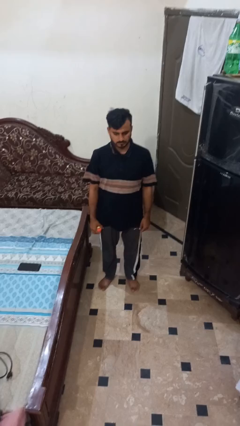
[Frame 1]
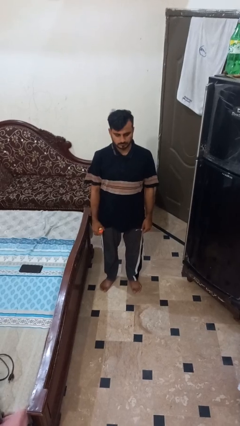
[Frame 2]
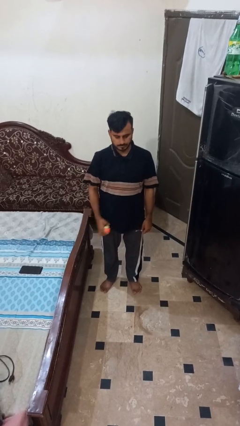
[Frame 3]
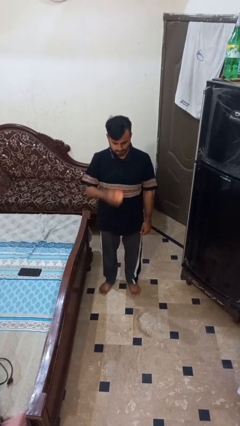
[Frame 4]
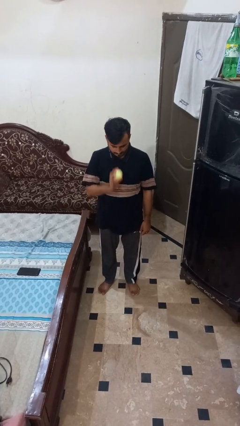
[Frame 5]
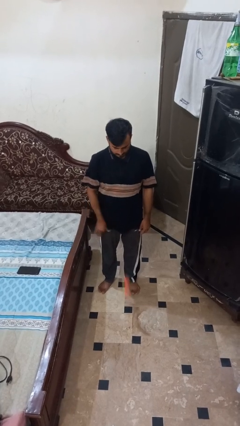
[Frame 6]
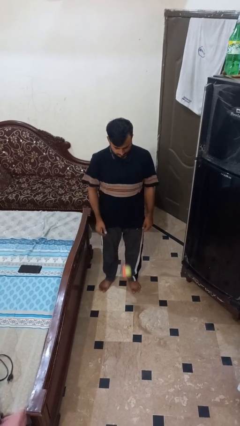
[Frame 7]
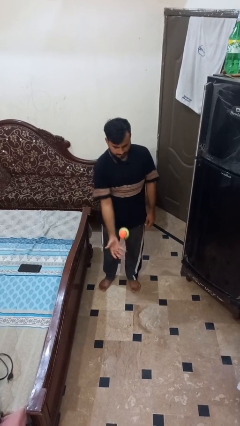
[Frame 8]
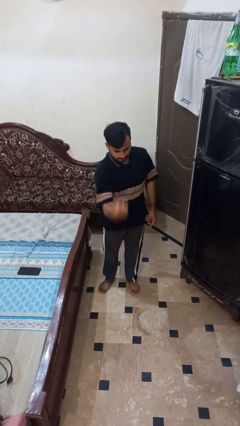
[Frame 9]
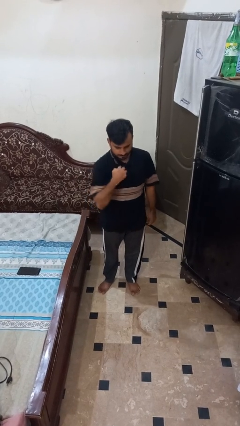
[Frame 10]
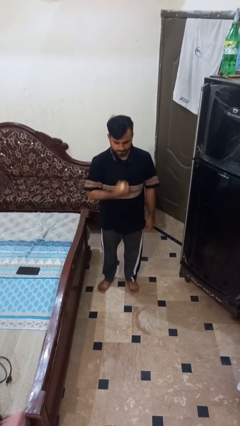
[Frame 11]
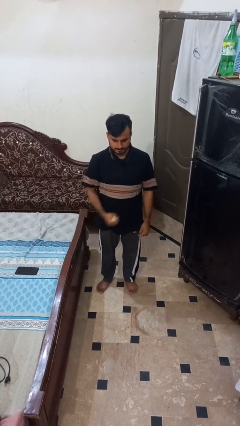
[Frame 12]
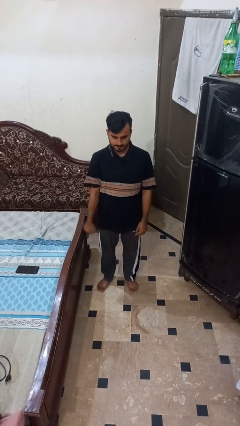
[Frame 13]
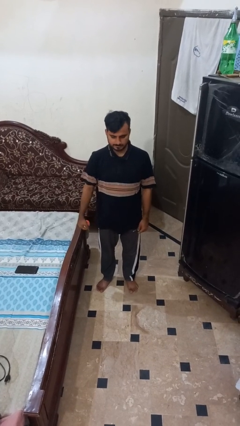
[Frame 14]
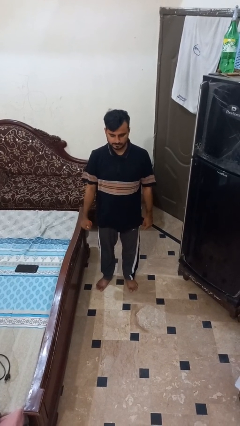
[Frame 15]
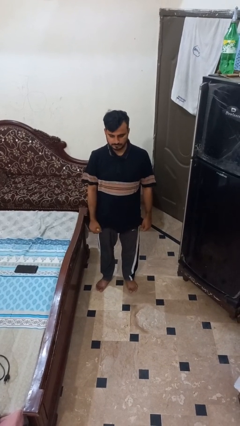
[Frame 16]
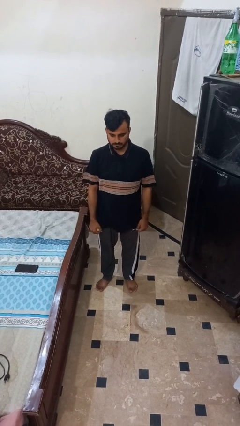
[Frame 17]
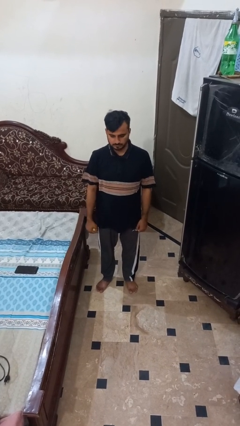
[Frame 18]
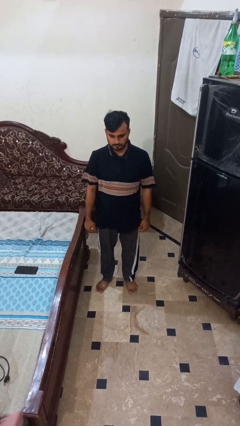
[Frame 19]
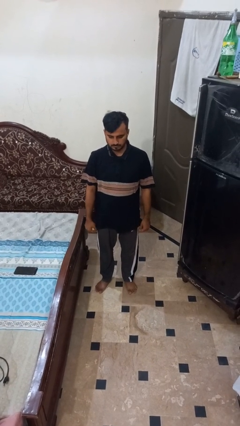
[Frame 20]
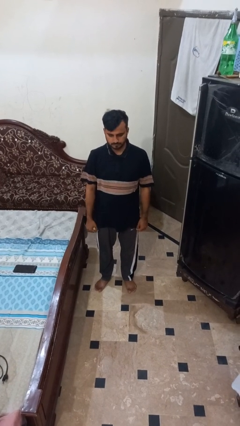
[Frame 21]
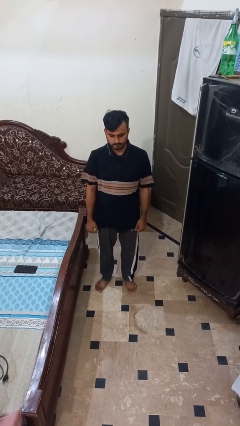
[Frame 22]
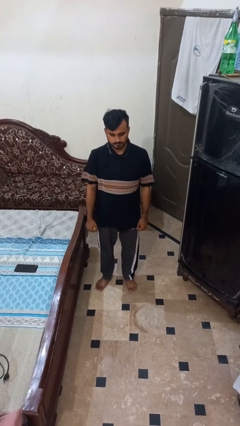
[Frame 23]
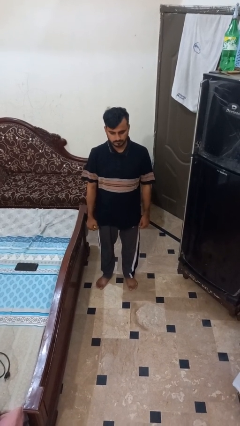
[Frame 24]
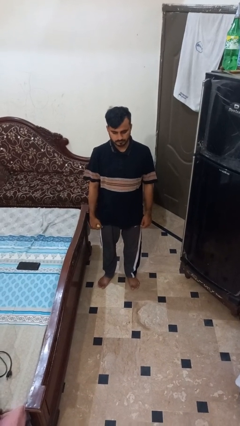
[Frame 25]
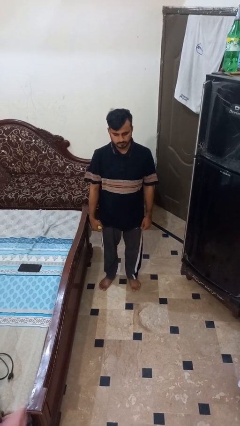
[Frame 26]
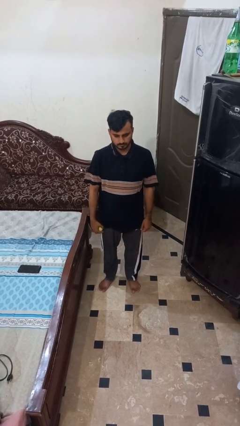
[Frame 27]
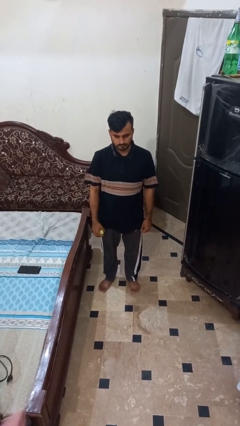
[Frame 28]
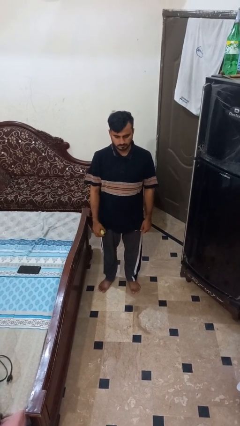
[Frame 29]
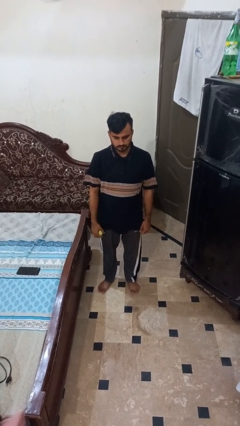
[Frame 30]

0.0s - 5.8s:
person bounces ball on floor

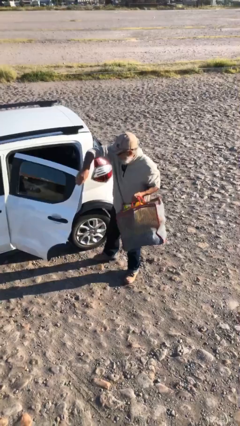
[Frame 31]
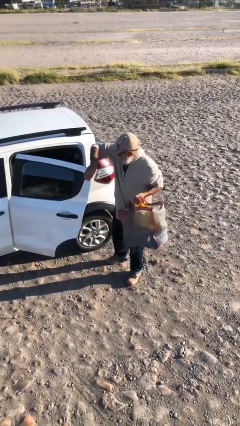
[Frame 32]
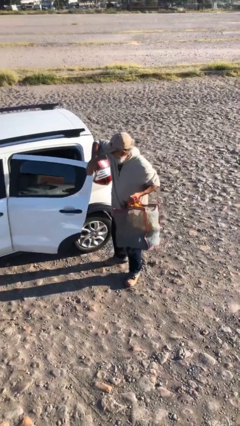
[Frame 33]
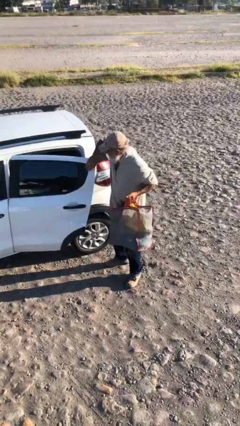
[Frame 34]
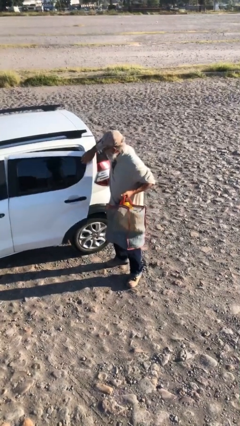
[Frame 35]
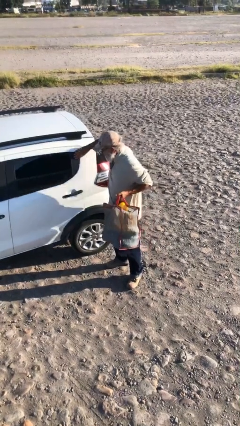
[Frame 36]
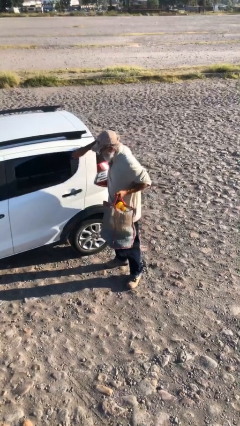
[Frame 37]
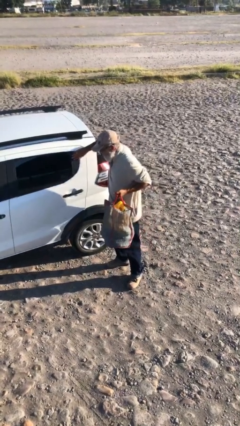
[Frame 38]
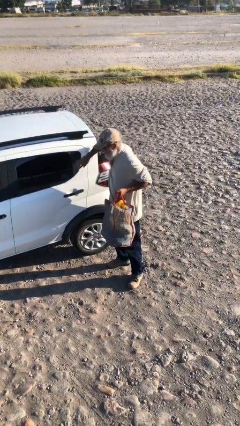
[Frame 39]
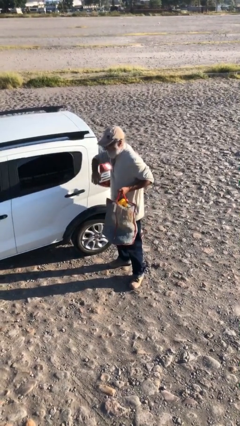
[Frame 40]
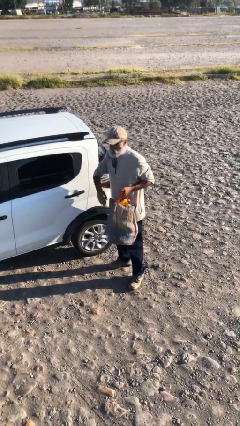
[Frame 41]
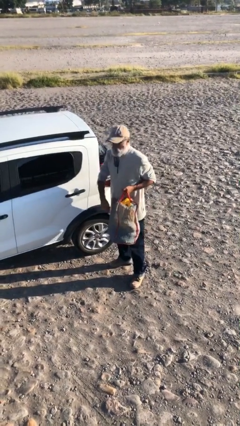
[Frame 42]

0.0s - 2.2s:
person closes car door

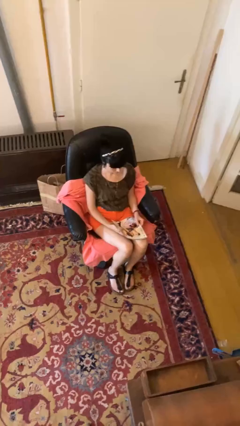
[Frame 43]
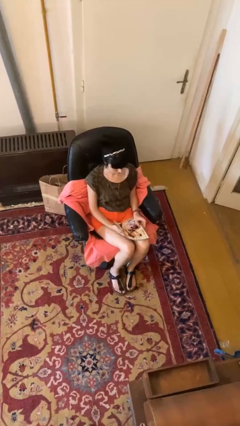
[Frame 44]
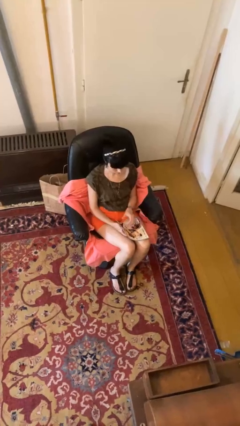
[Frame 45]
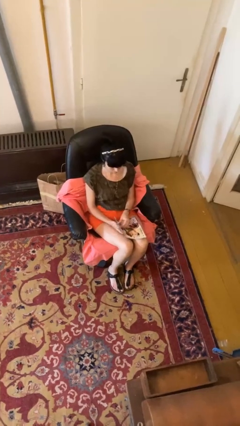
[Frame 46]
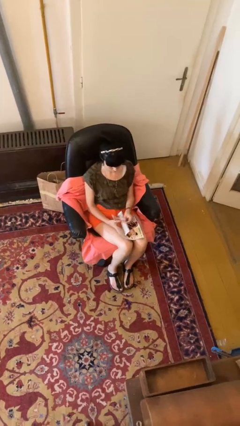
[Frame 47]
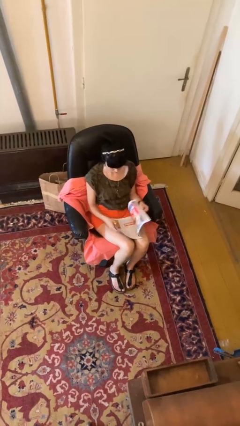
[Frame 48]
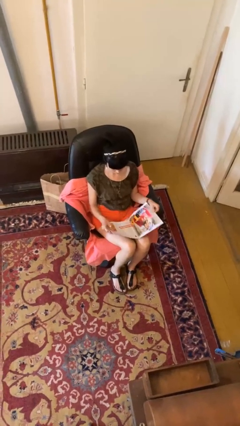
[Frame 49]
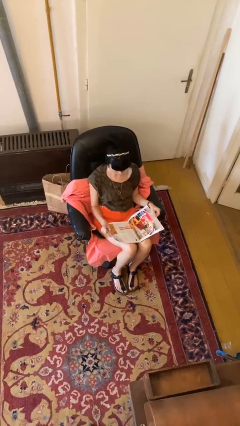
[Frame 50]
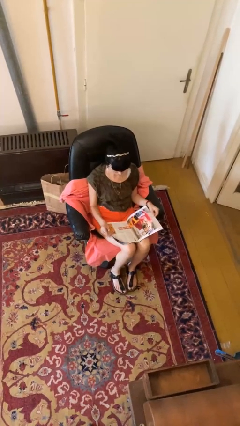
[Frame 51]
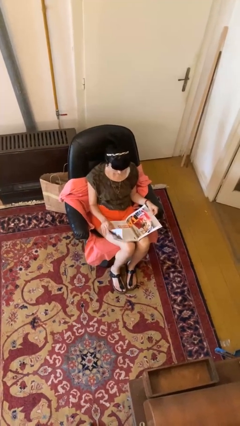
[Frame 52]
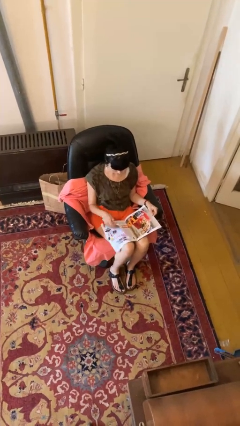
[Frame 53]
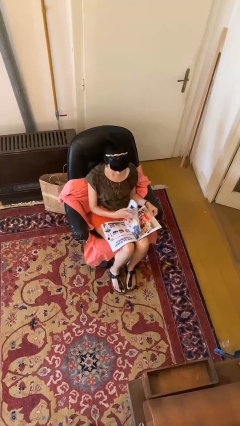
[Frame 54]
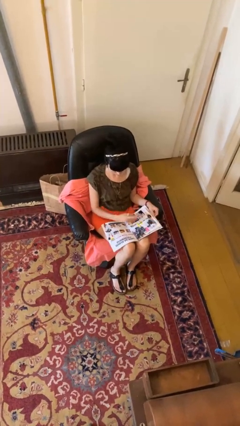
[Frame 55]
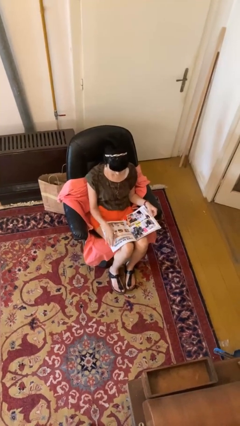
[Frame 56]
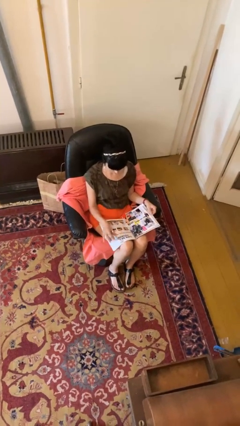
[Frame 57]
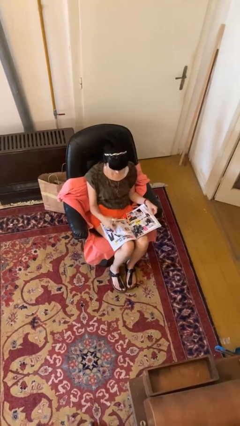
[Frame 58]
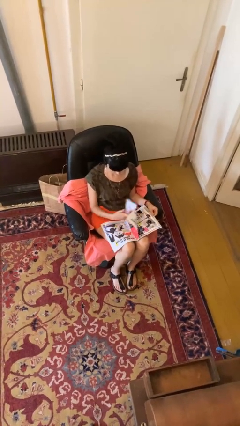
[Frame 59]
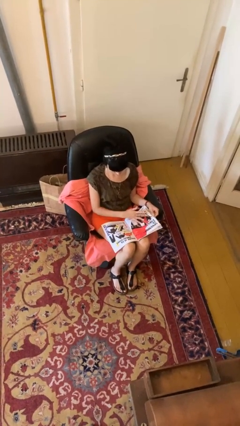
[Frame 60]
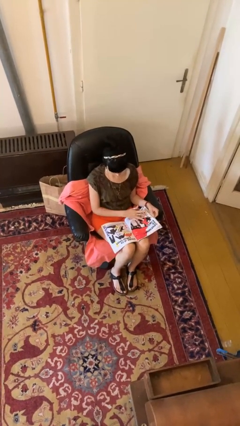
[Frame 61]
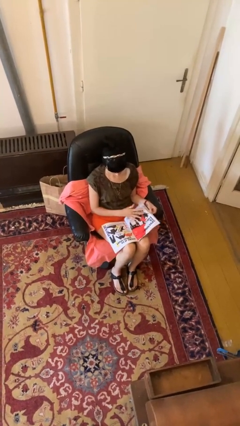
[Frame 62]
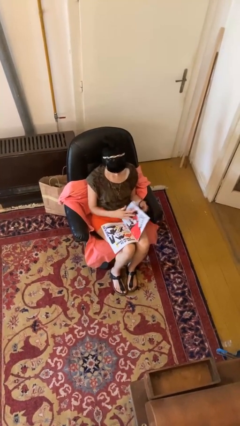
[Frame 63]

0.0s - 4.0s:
person reads magazine

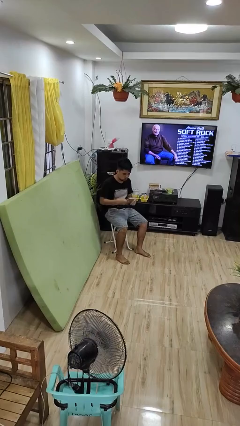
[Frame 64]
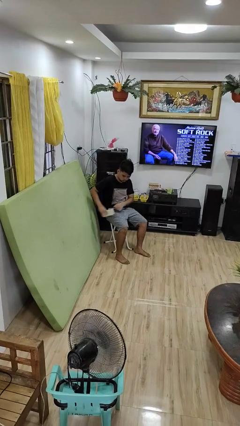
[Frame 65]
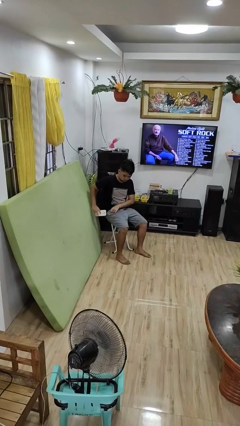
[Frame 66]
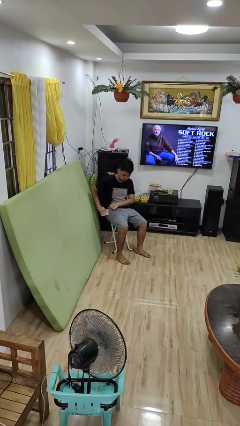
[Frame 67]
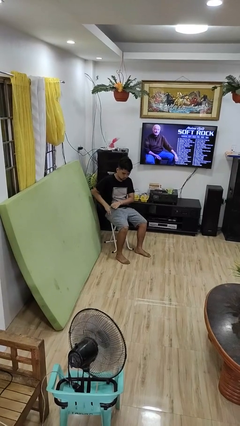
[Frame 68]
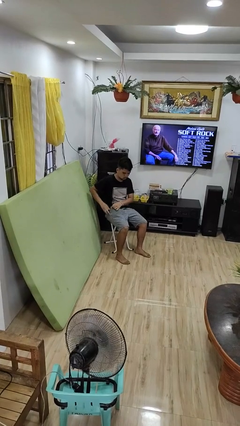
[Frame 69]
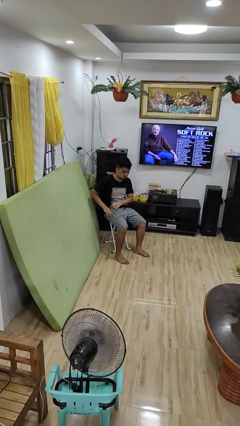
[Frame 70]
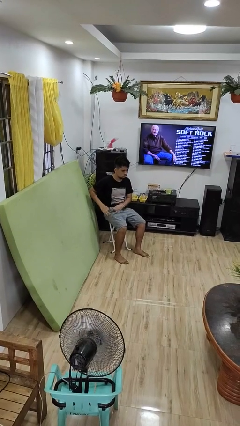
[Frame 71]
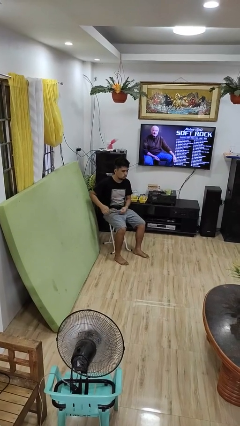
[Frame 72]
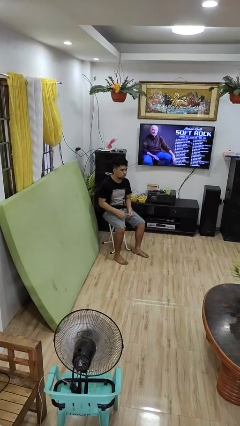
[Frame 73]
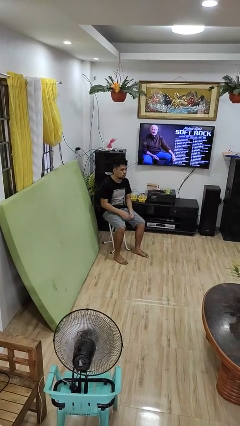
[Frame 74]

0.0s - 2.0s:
person puts phone into pocket

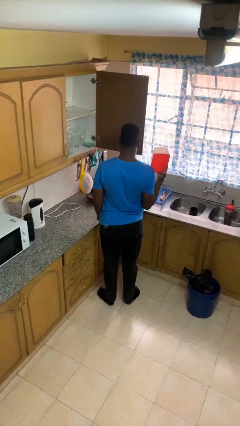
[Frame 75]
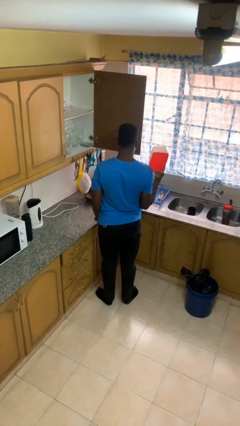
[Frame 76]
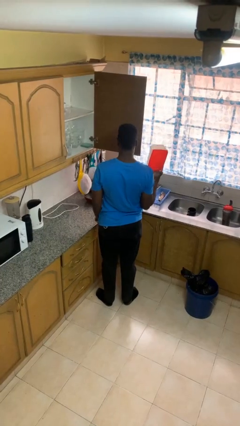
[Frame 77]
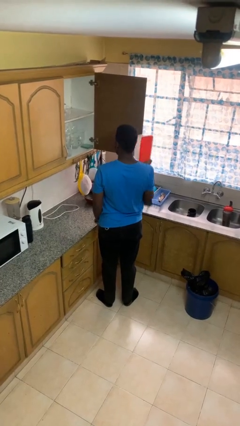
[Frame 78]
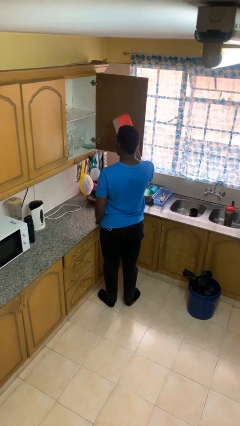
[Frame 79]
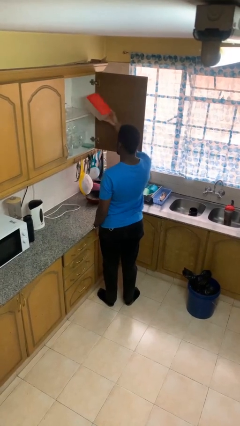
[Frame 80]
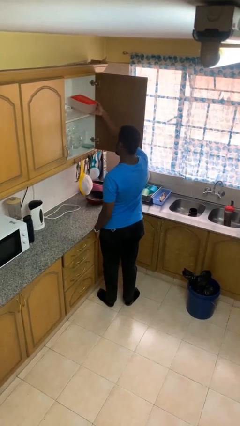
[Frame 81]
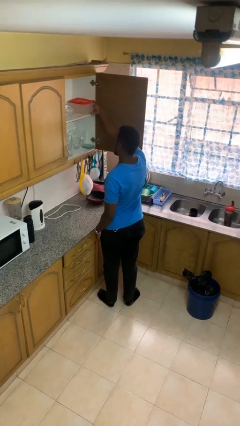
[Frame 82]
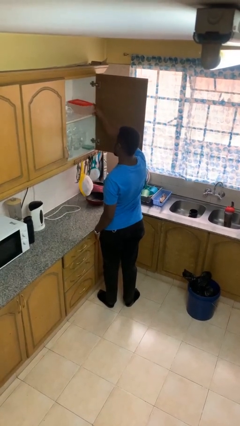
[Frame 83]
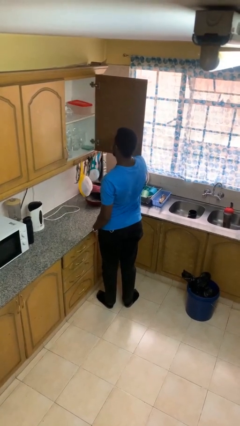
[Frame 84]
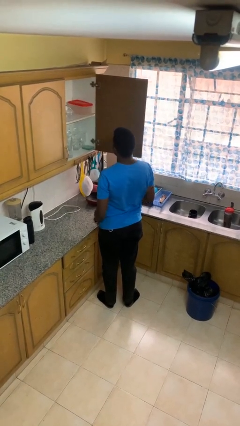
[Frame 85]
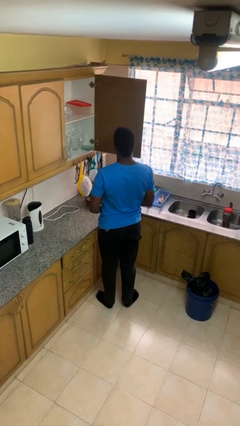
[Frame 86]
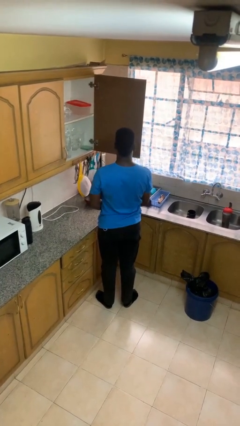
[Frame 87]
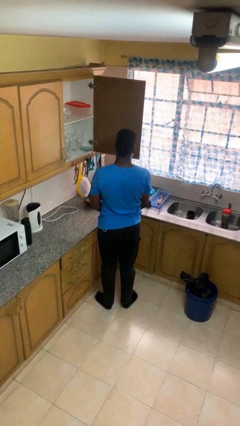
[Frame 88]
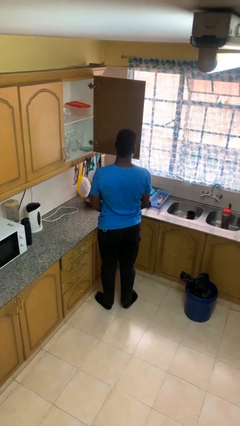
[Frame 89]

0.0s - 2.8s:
person puts down object into cabinet

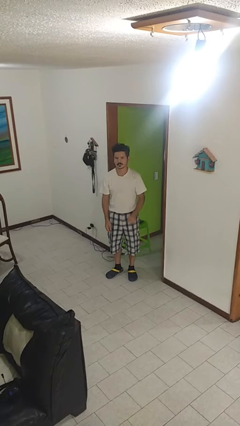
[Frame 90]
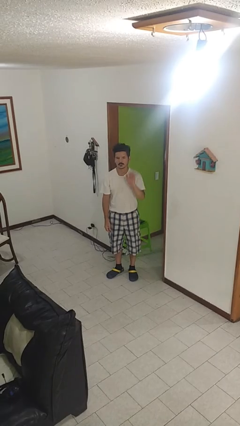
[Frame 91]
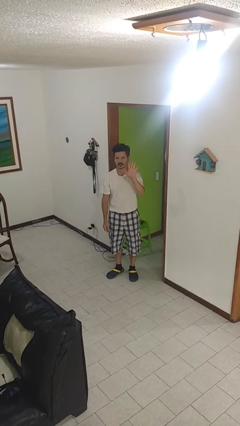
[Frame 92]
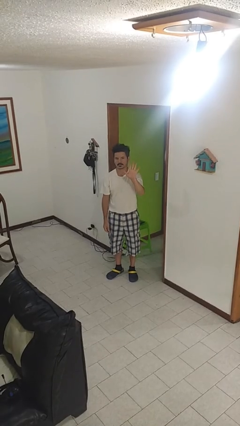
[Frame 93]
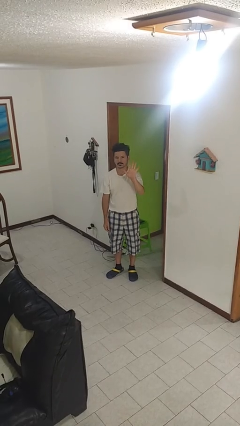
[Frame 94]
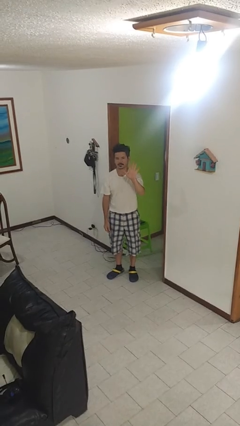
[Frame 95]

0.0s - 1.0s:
person gestures number five
